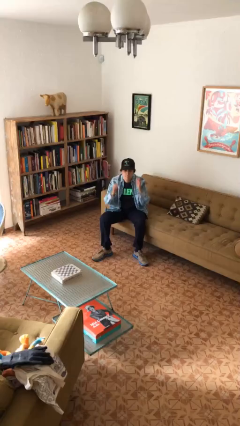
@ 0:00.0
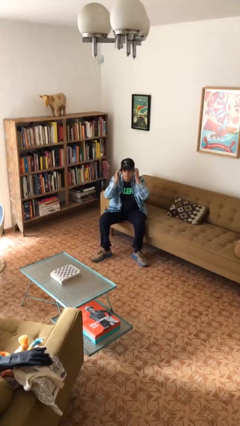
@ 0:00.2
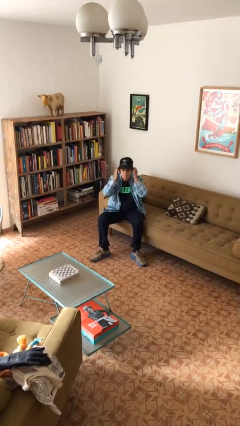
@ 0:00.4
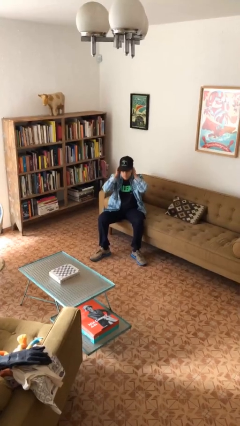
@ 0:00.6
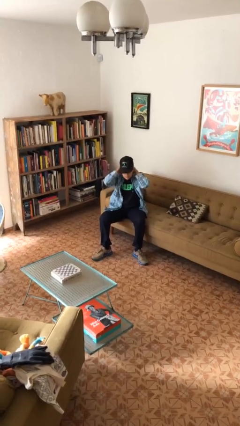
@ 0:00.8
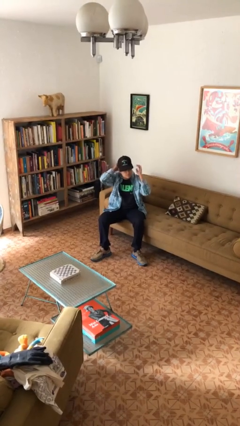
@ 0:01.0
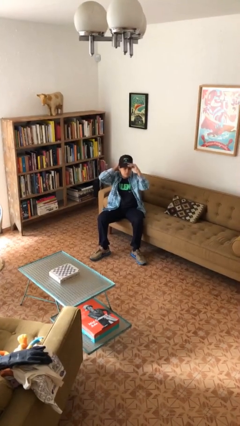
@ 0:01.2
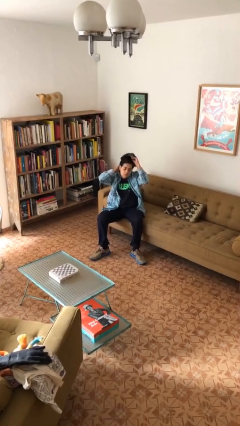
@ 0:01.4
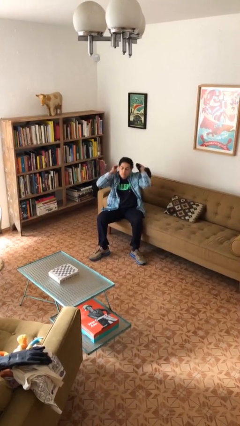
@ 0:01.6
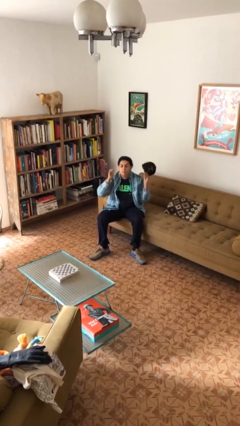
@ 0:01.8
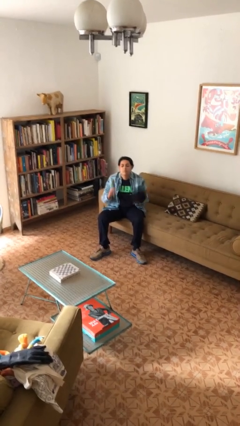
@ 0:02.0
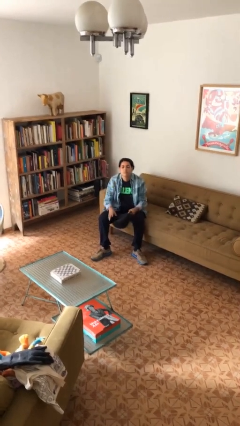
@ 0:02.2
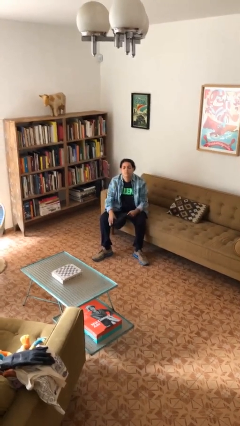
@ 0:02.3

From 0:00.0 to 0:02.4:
person takes off hat

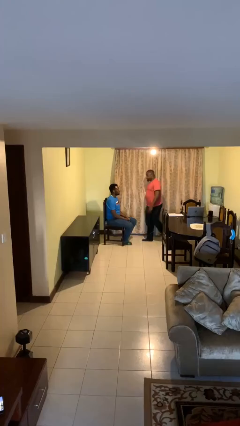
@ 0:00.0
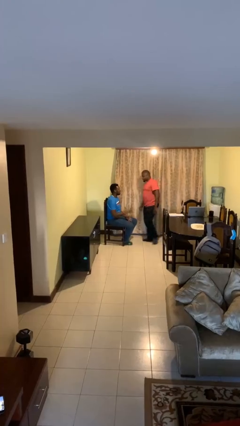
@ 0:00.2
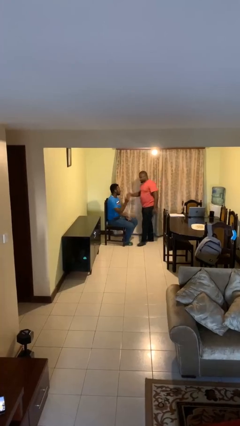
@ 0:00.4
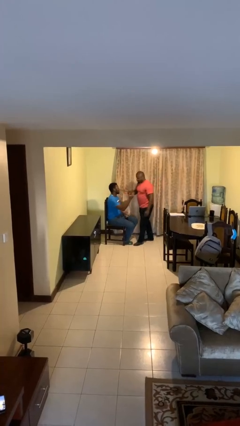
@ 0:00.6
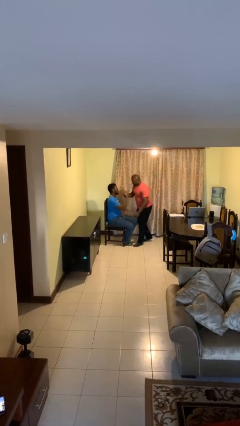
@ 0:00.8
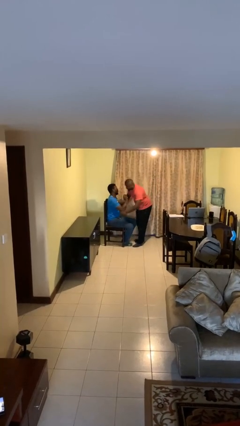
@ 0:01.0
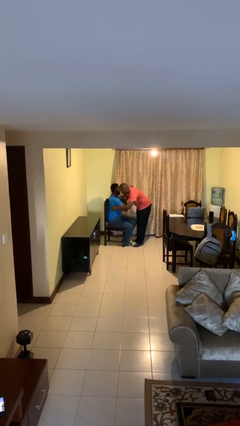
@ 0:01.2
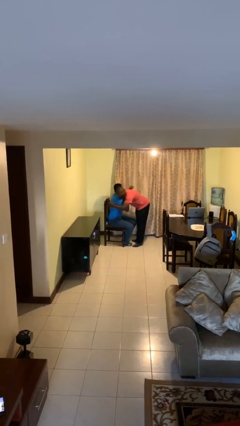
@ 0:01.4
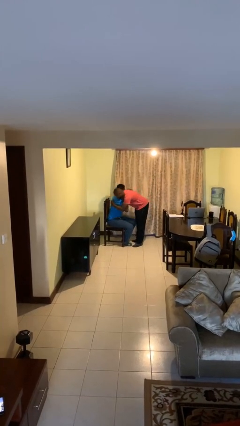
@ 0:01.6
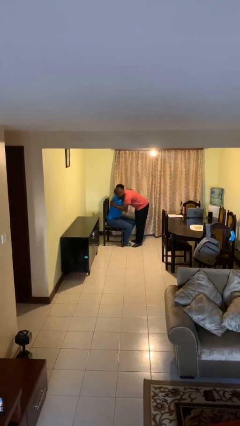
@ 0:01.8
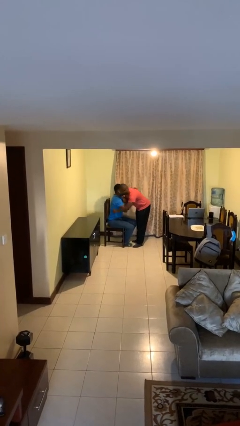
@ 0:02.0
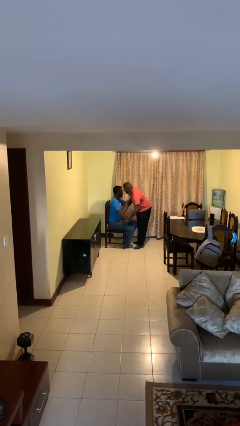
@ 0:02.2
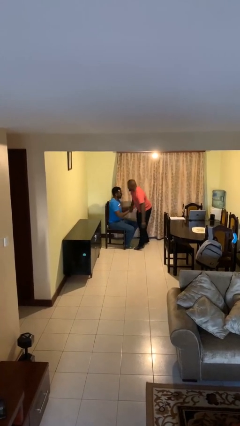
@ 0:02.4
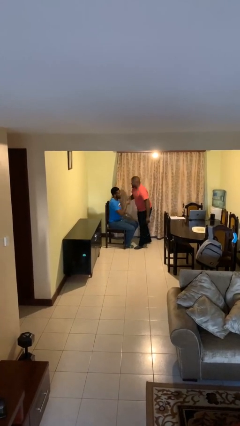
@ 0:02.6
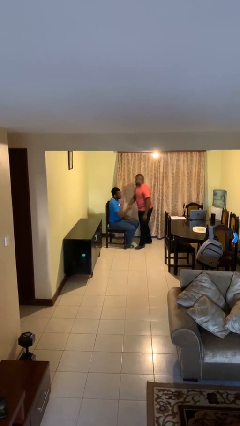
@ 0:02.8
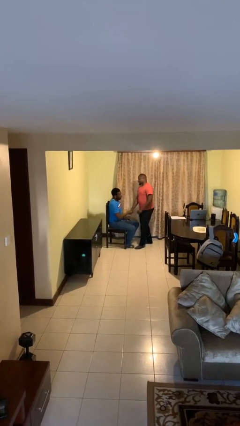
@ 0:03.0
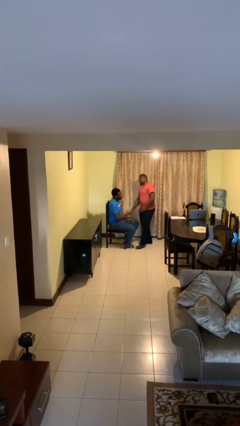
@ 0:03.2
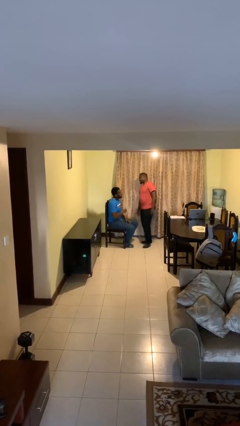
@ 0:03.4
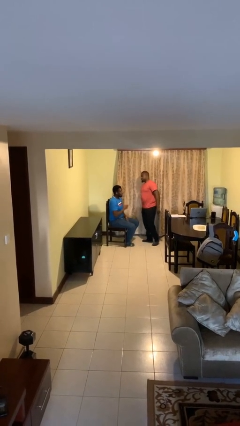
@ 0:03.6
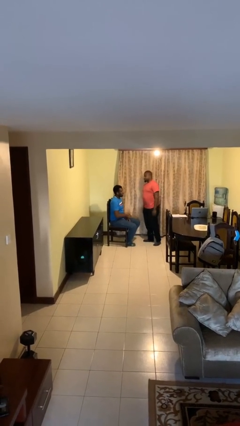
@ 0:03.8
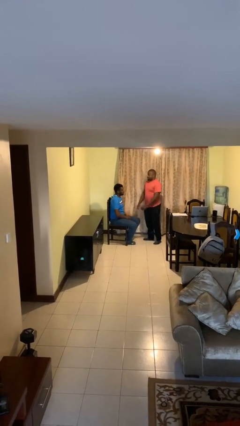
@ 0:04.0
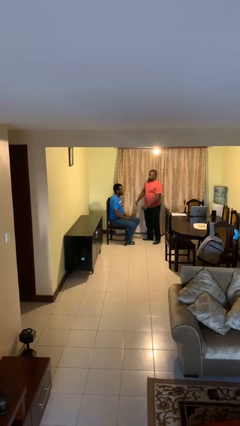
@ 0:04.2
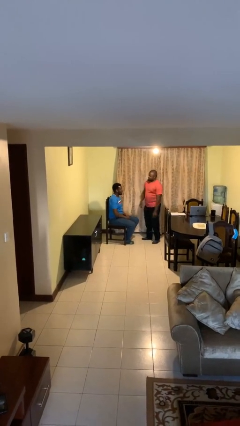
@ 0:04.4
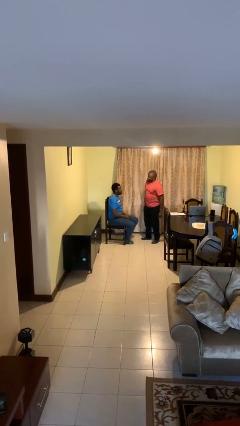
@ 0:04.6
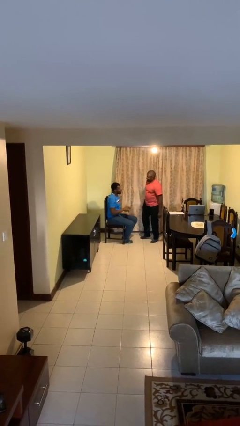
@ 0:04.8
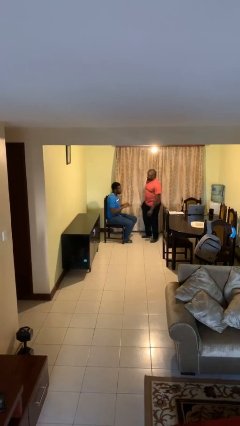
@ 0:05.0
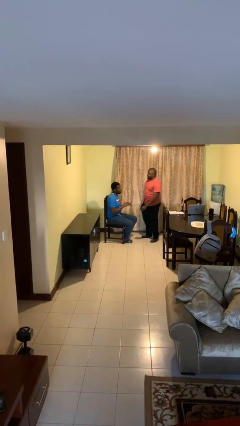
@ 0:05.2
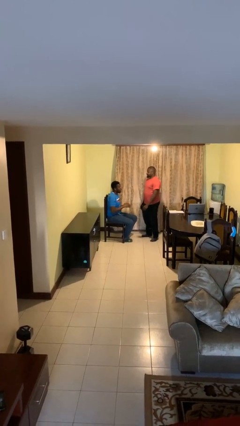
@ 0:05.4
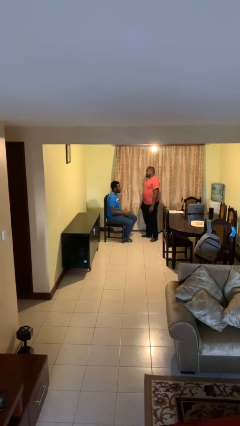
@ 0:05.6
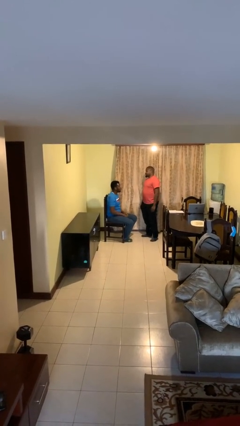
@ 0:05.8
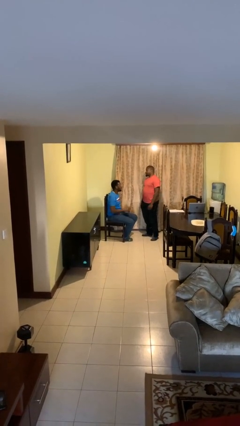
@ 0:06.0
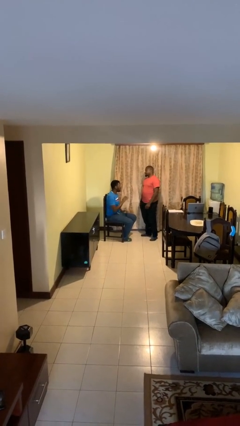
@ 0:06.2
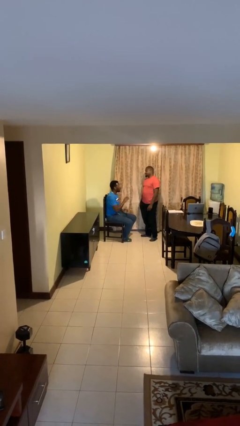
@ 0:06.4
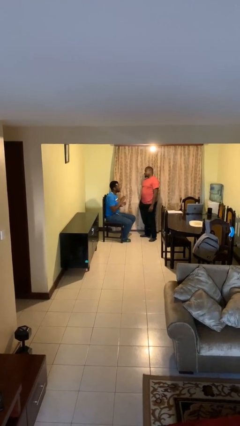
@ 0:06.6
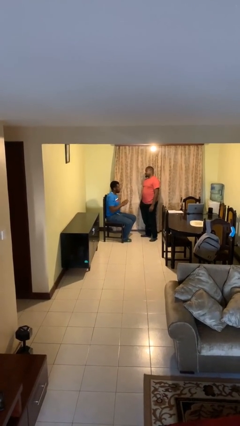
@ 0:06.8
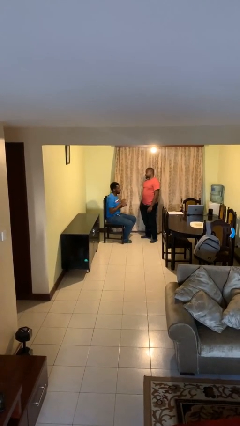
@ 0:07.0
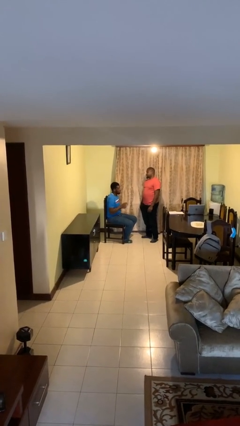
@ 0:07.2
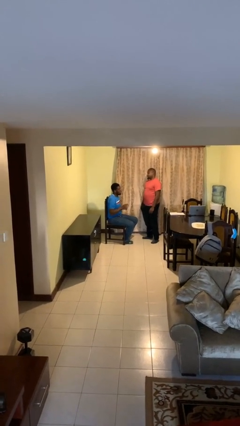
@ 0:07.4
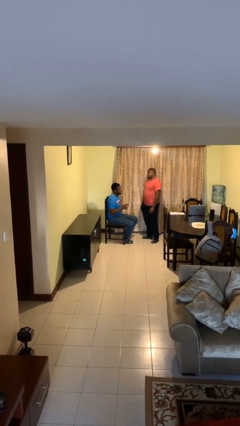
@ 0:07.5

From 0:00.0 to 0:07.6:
person embraces person

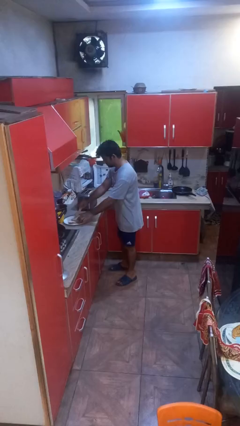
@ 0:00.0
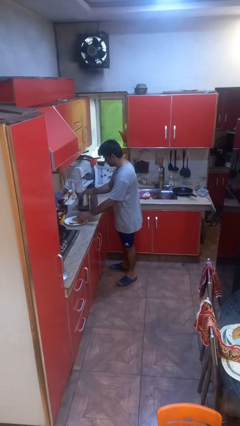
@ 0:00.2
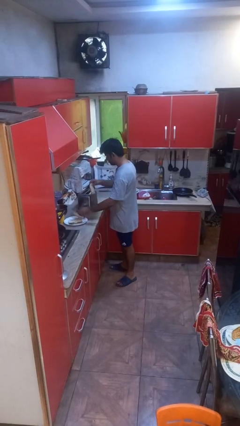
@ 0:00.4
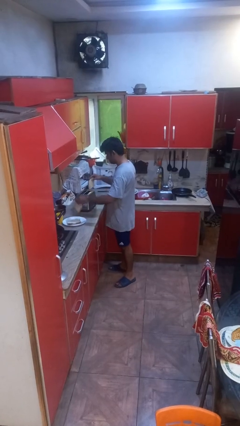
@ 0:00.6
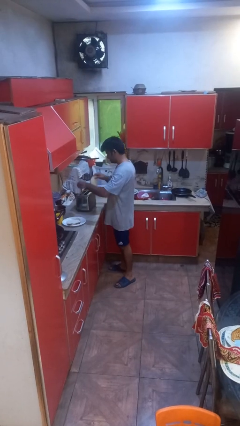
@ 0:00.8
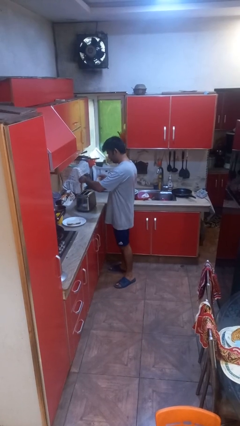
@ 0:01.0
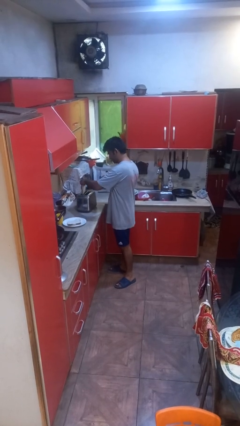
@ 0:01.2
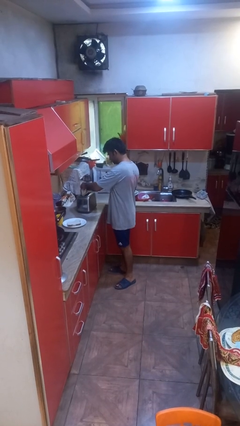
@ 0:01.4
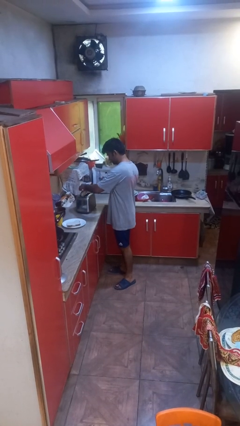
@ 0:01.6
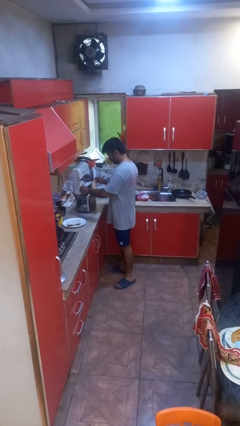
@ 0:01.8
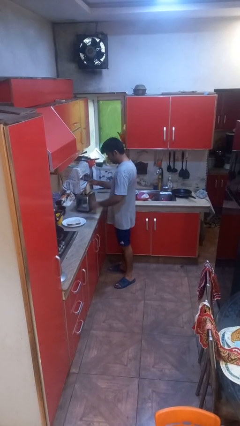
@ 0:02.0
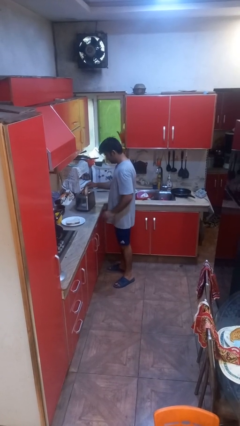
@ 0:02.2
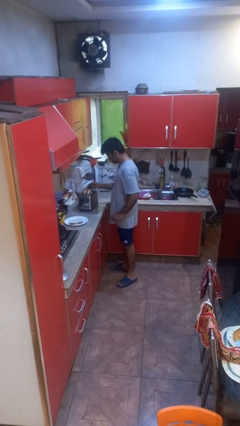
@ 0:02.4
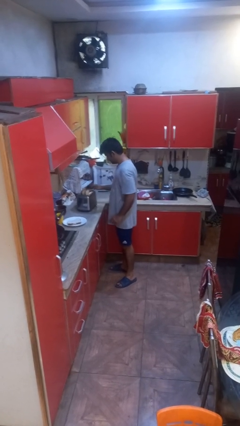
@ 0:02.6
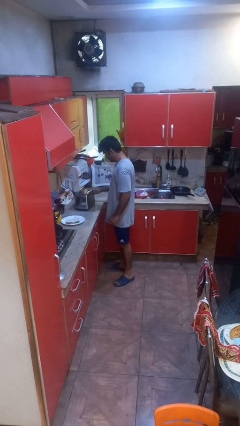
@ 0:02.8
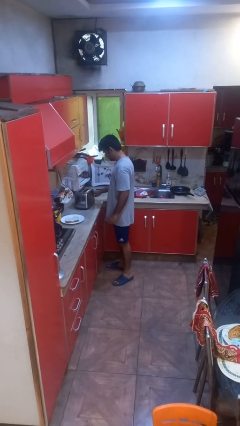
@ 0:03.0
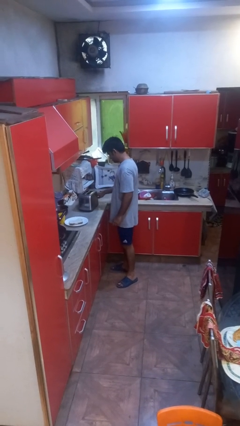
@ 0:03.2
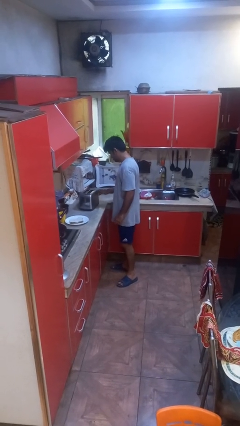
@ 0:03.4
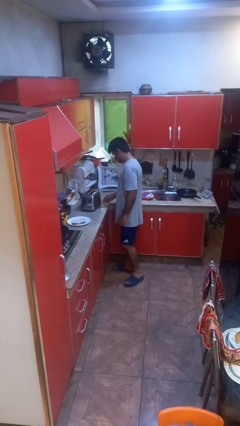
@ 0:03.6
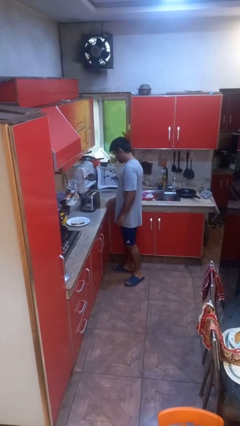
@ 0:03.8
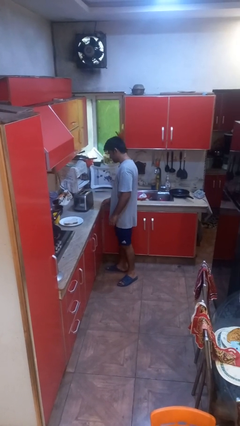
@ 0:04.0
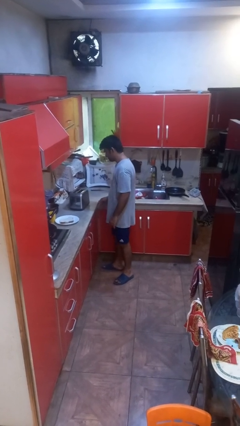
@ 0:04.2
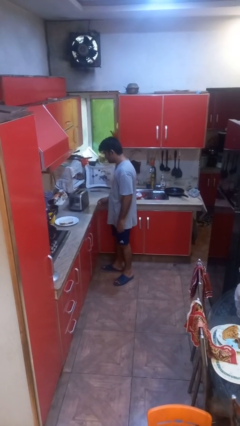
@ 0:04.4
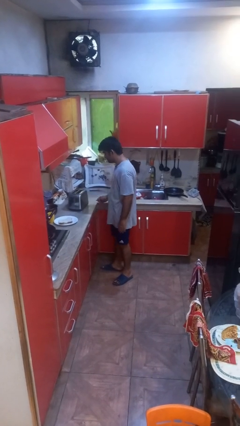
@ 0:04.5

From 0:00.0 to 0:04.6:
person puts object into toaster

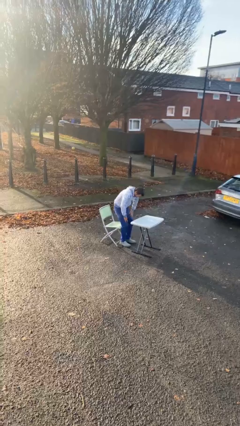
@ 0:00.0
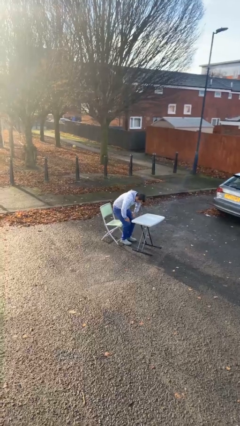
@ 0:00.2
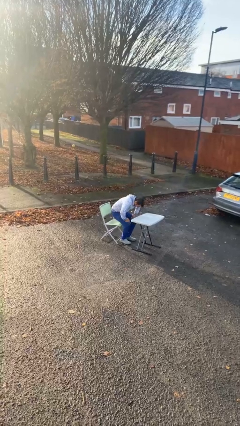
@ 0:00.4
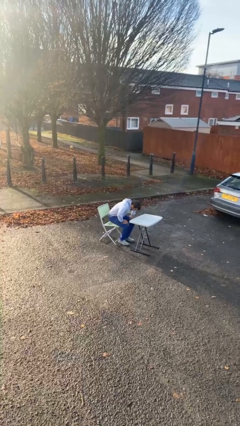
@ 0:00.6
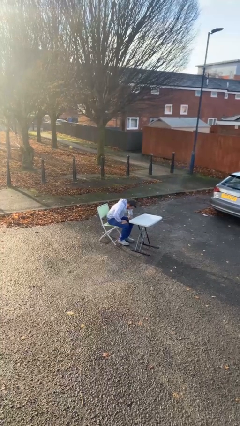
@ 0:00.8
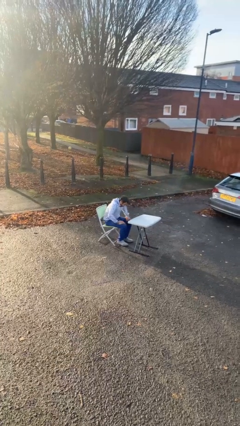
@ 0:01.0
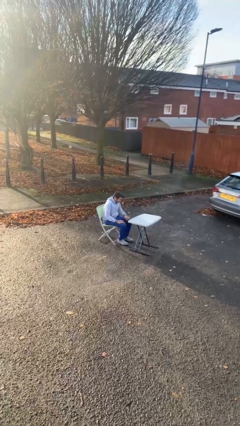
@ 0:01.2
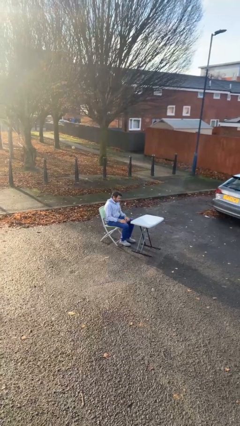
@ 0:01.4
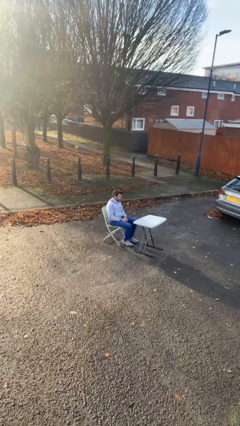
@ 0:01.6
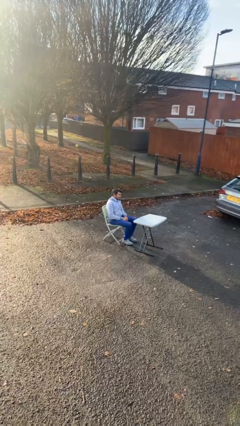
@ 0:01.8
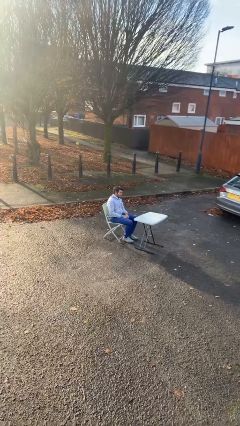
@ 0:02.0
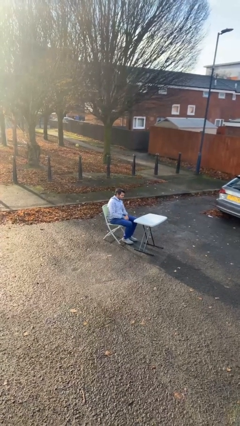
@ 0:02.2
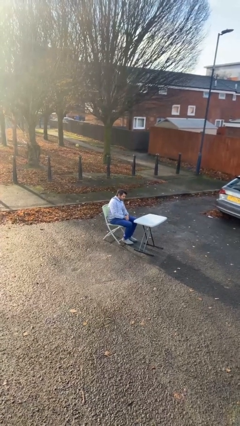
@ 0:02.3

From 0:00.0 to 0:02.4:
person sits down
